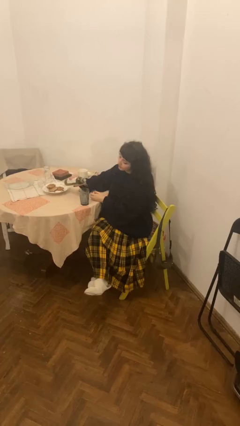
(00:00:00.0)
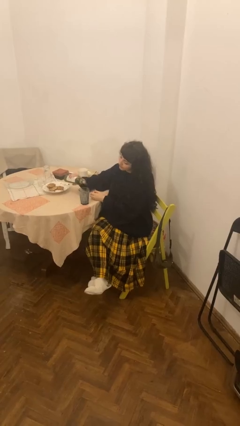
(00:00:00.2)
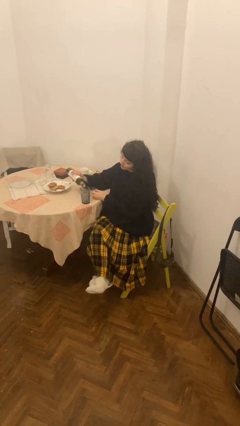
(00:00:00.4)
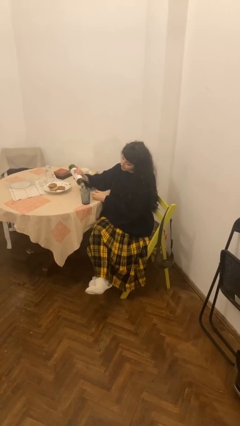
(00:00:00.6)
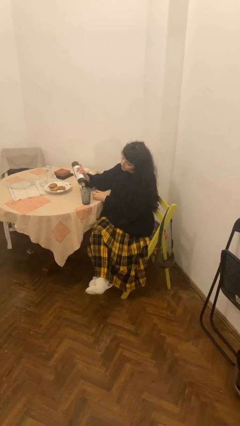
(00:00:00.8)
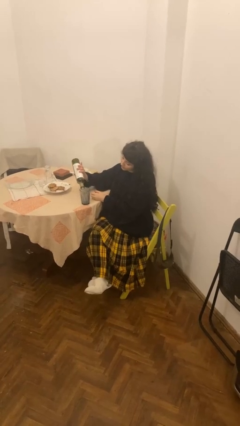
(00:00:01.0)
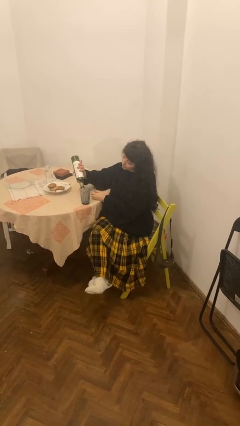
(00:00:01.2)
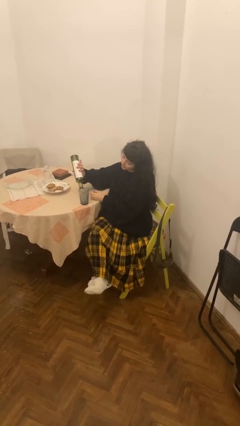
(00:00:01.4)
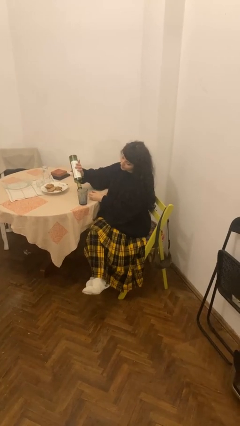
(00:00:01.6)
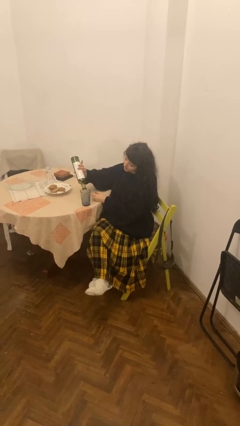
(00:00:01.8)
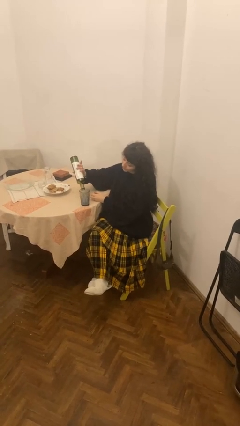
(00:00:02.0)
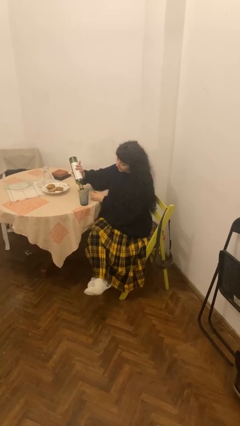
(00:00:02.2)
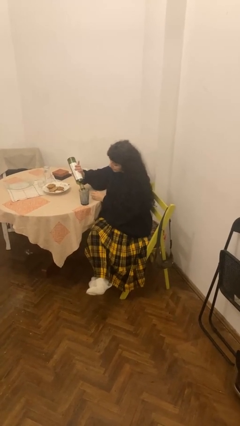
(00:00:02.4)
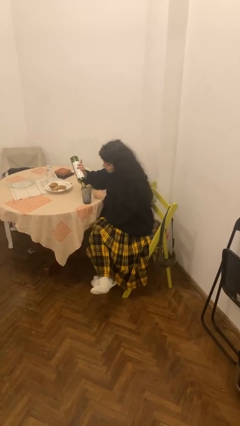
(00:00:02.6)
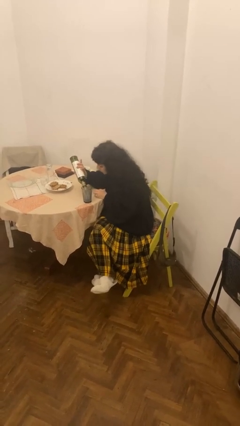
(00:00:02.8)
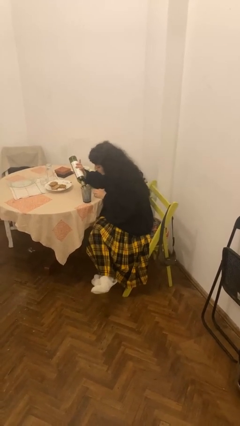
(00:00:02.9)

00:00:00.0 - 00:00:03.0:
person pours liquid into cup

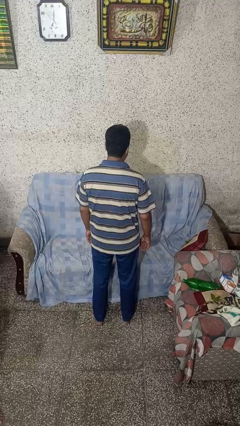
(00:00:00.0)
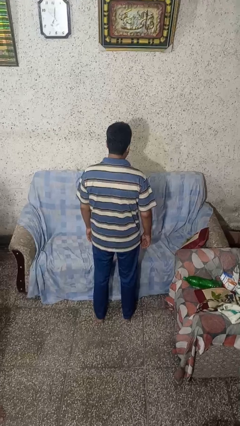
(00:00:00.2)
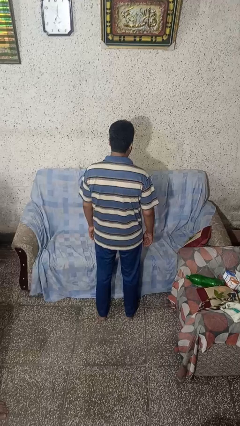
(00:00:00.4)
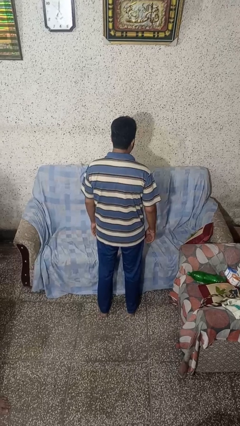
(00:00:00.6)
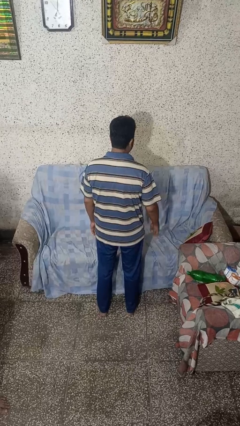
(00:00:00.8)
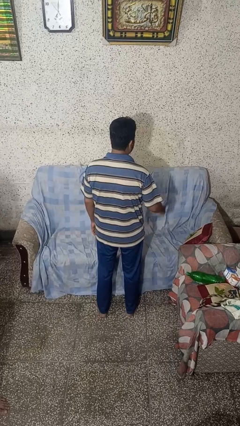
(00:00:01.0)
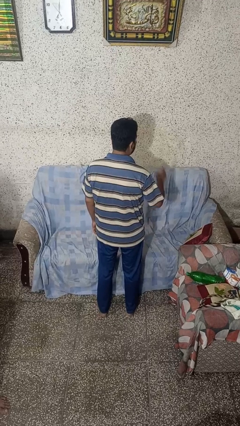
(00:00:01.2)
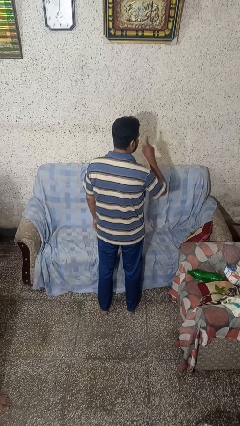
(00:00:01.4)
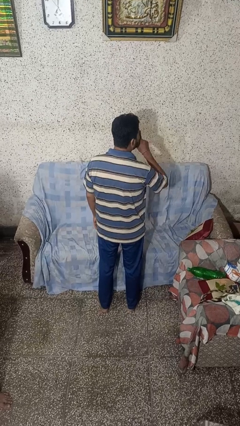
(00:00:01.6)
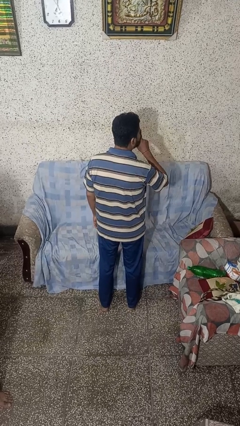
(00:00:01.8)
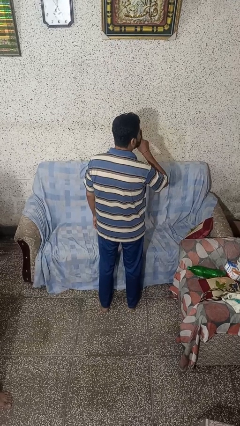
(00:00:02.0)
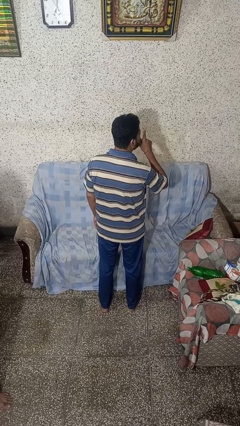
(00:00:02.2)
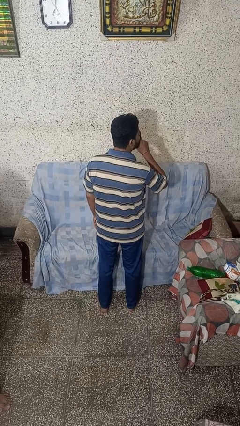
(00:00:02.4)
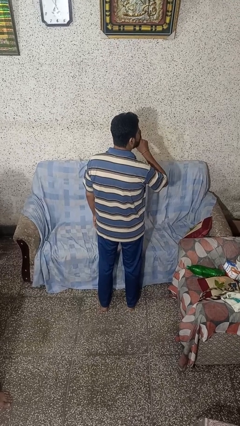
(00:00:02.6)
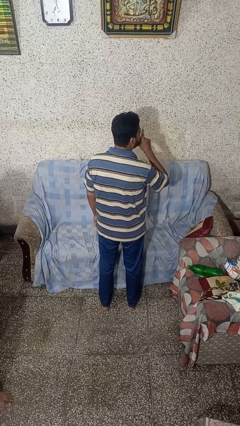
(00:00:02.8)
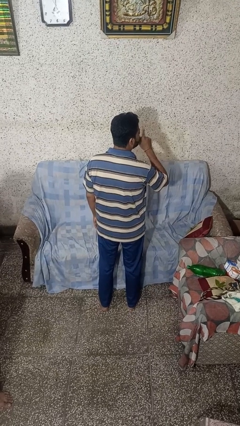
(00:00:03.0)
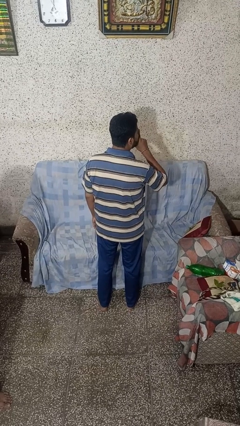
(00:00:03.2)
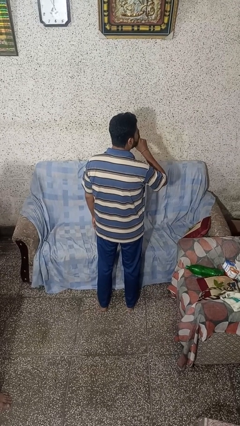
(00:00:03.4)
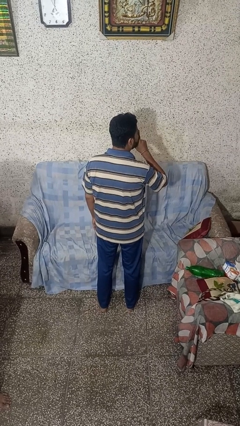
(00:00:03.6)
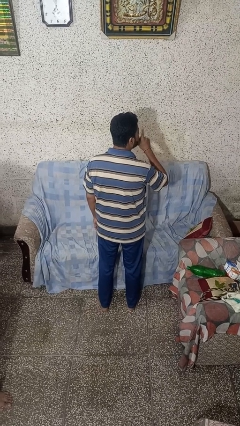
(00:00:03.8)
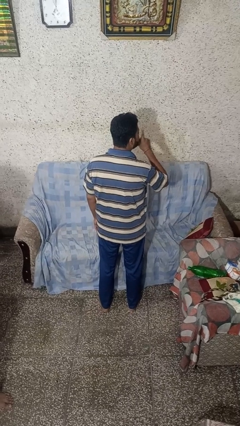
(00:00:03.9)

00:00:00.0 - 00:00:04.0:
person gestures be quiet

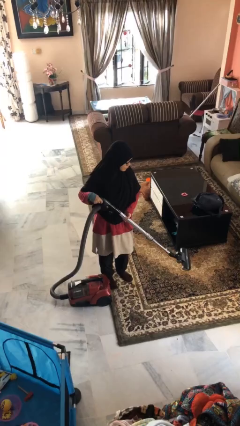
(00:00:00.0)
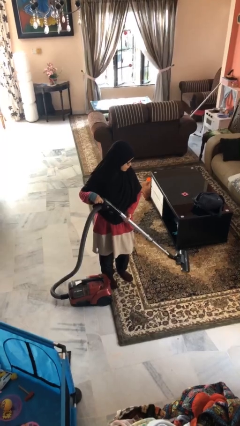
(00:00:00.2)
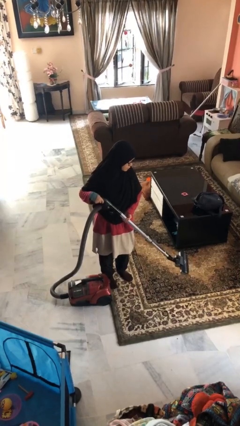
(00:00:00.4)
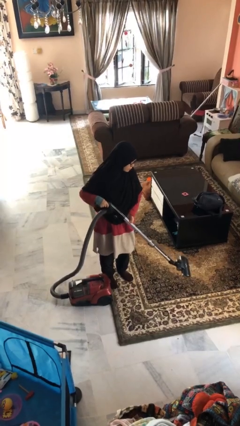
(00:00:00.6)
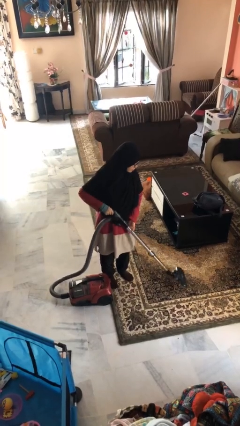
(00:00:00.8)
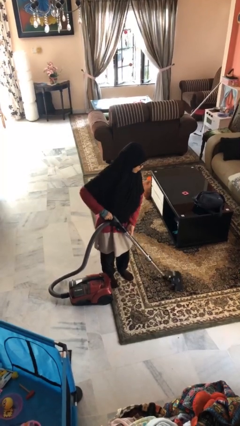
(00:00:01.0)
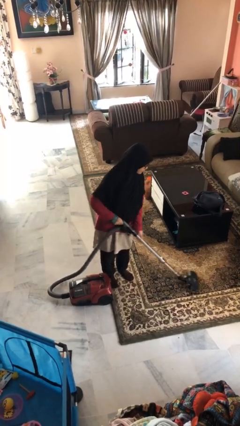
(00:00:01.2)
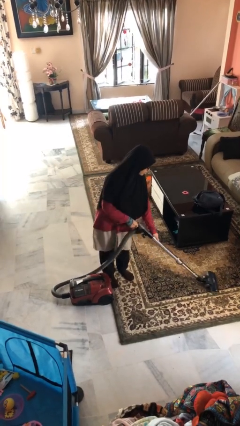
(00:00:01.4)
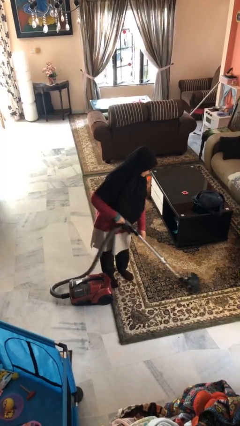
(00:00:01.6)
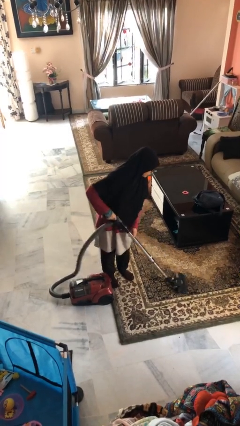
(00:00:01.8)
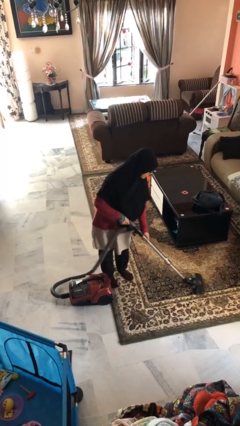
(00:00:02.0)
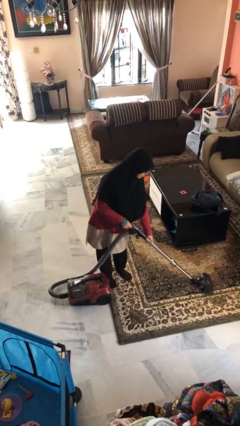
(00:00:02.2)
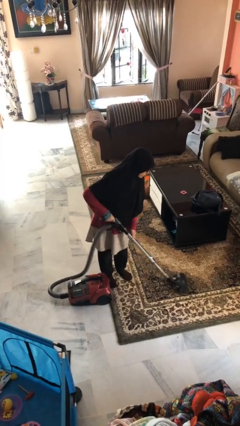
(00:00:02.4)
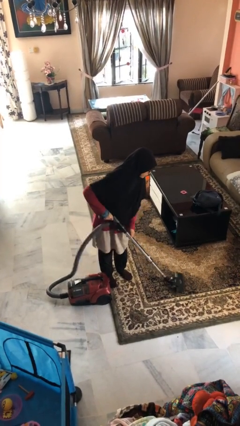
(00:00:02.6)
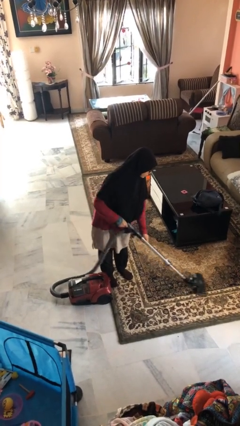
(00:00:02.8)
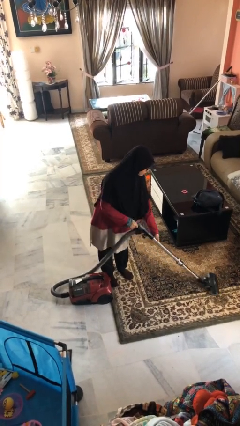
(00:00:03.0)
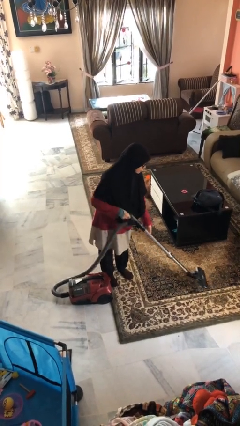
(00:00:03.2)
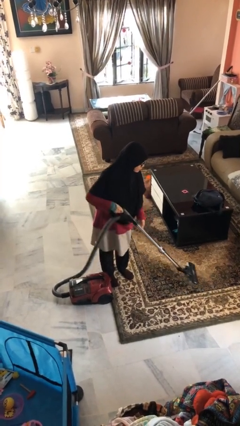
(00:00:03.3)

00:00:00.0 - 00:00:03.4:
person vacuums carpet

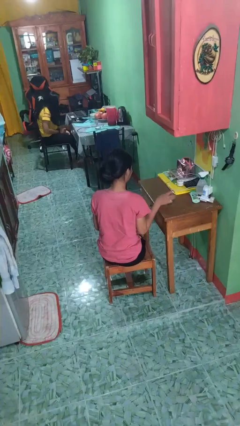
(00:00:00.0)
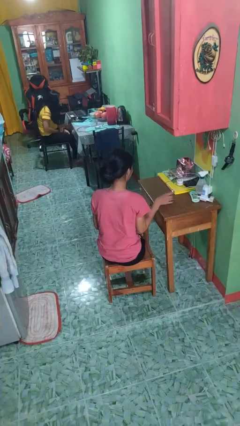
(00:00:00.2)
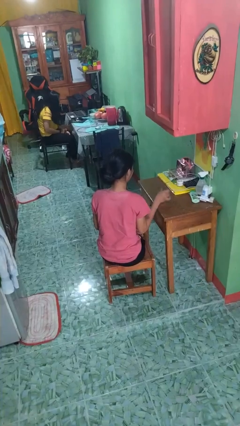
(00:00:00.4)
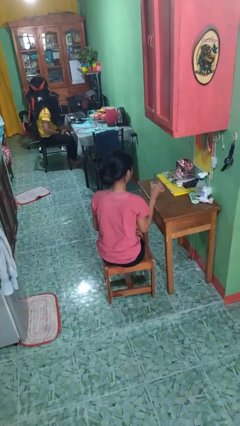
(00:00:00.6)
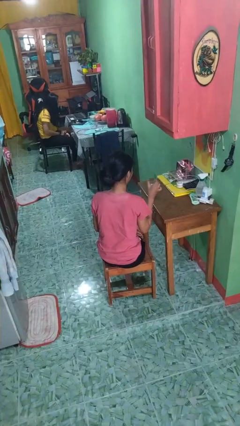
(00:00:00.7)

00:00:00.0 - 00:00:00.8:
person picks up object from table

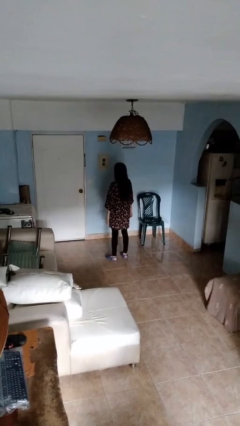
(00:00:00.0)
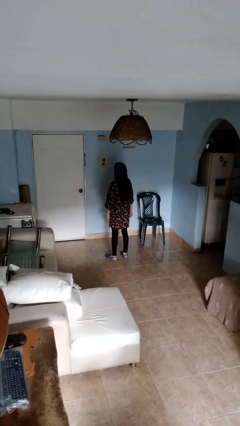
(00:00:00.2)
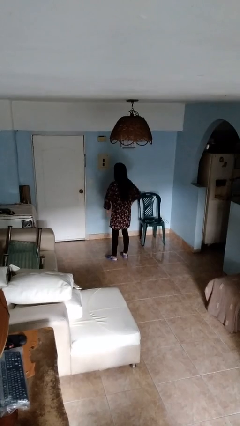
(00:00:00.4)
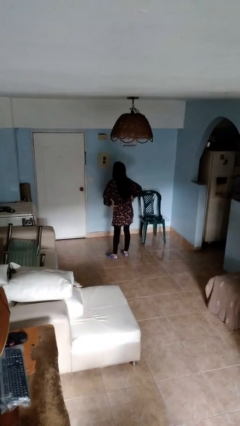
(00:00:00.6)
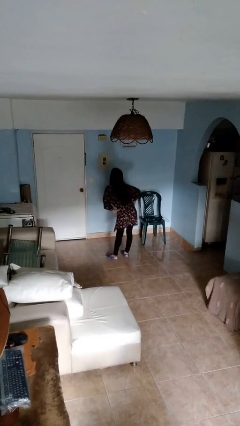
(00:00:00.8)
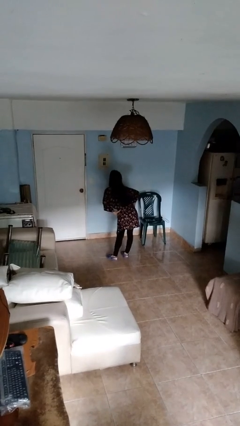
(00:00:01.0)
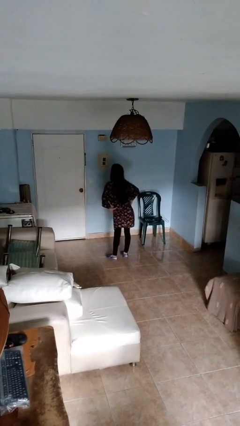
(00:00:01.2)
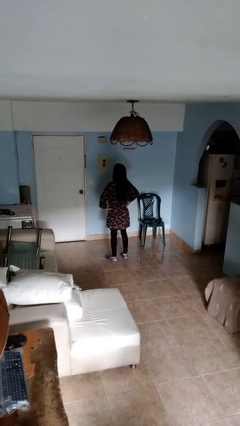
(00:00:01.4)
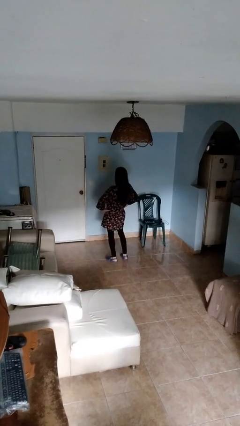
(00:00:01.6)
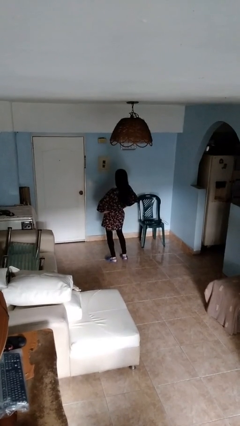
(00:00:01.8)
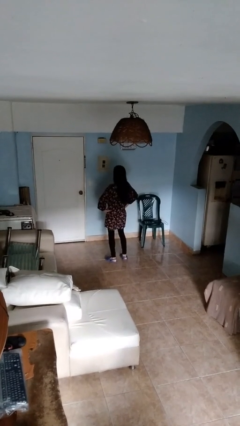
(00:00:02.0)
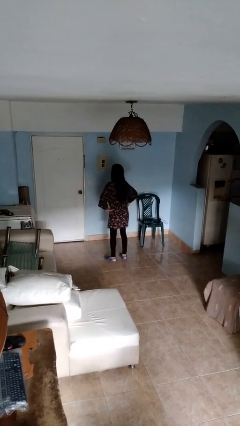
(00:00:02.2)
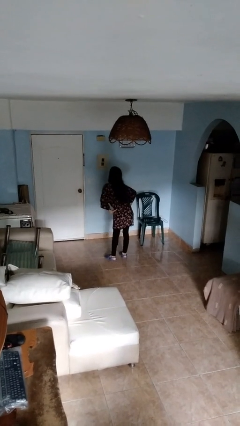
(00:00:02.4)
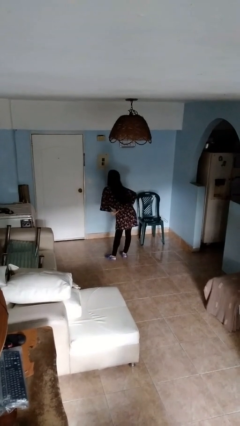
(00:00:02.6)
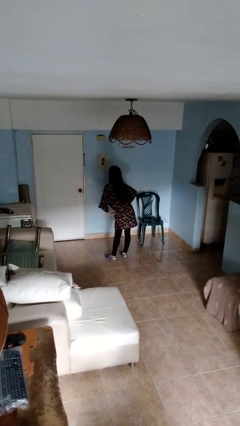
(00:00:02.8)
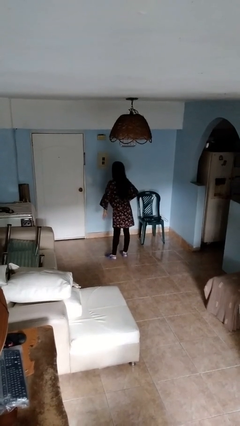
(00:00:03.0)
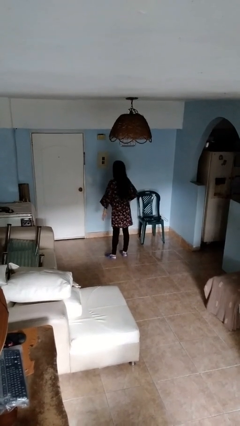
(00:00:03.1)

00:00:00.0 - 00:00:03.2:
person wiggles hips

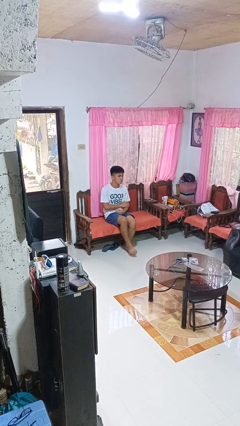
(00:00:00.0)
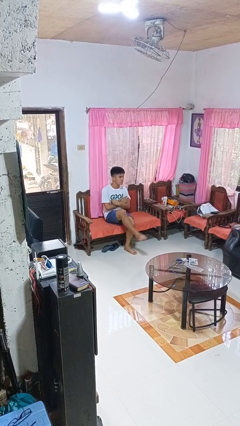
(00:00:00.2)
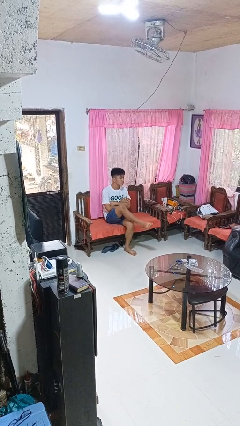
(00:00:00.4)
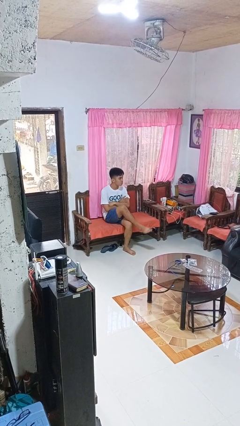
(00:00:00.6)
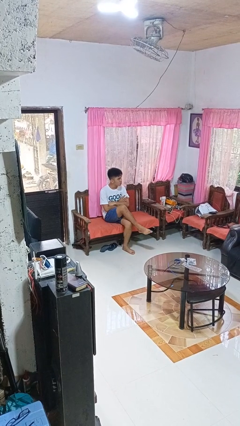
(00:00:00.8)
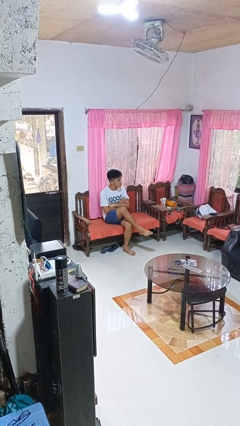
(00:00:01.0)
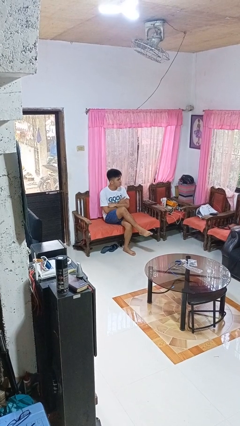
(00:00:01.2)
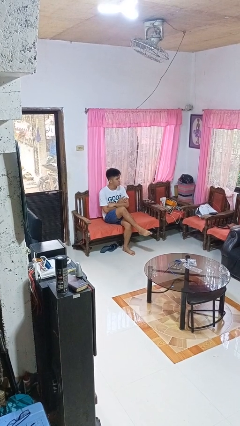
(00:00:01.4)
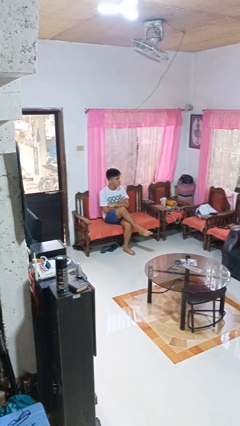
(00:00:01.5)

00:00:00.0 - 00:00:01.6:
person crosses legs

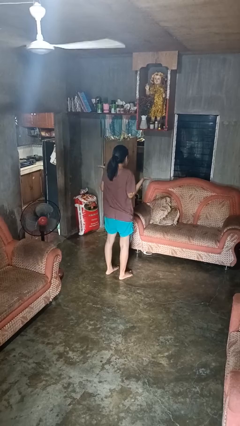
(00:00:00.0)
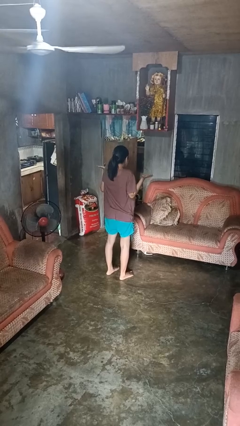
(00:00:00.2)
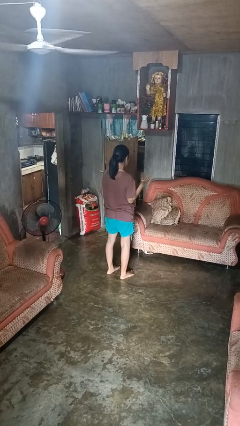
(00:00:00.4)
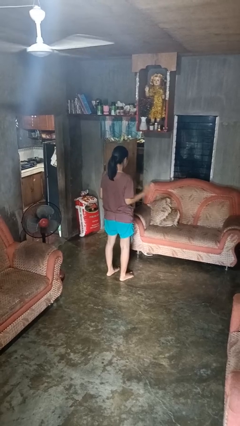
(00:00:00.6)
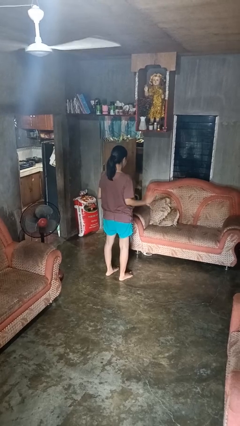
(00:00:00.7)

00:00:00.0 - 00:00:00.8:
person shrugs
